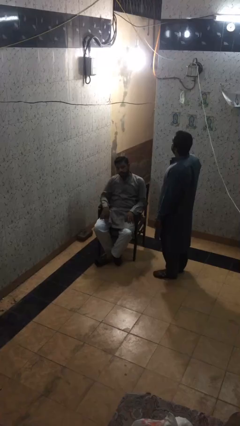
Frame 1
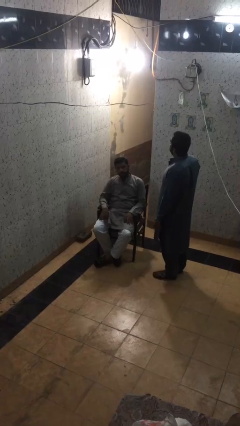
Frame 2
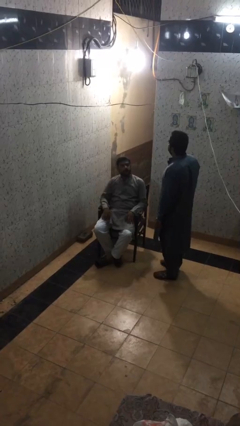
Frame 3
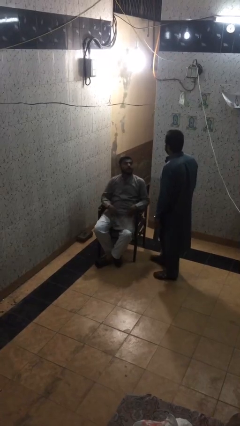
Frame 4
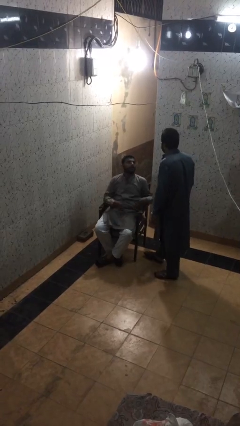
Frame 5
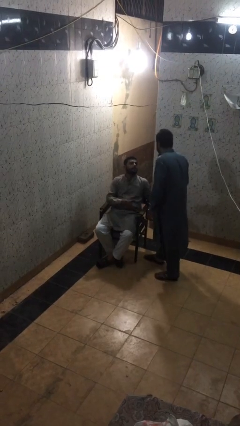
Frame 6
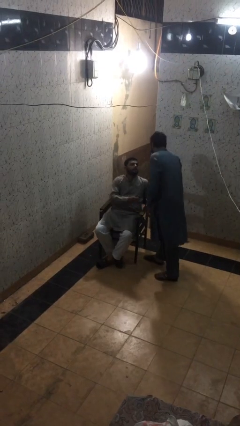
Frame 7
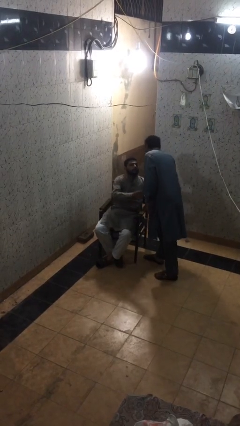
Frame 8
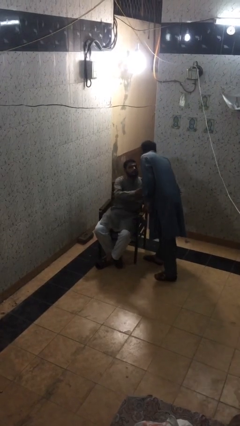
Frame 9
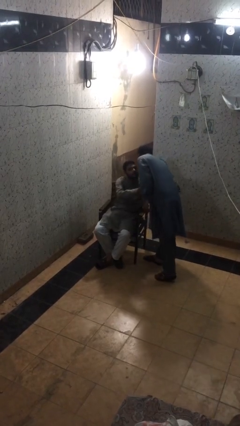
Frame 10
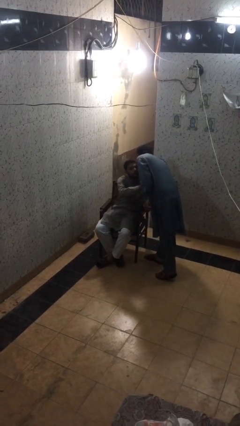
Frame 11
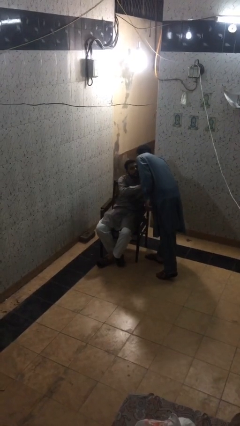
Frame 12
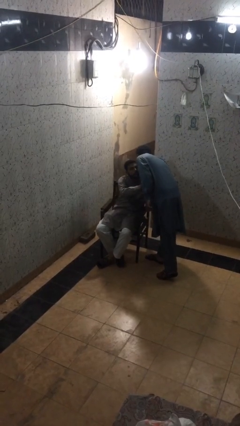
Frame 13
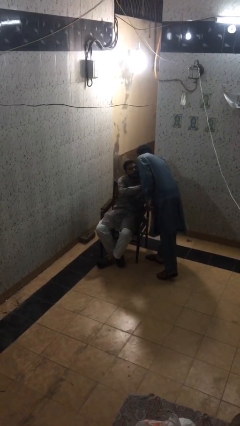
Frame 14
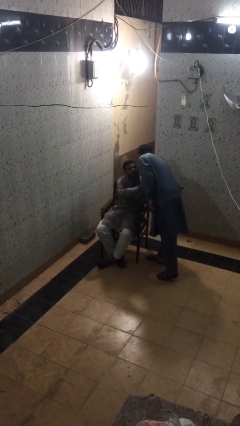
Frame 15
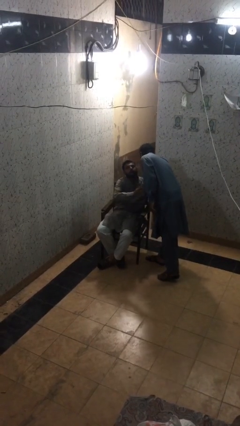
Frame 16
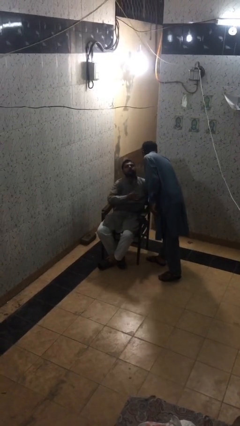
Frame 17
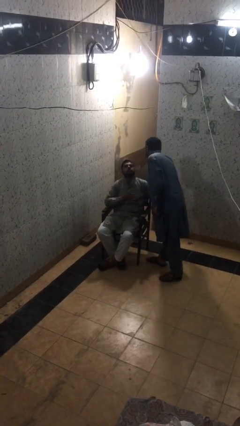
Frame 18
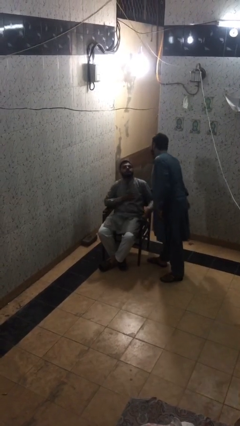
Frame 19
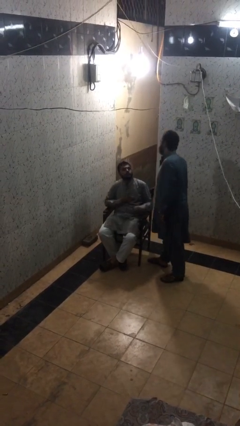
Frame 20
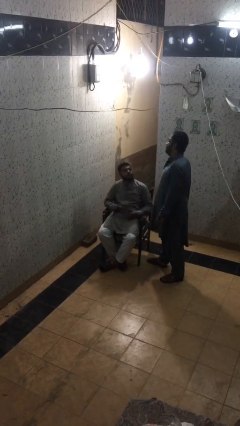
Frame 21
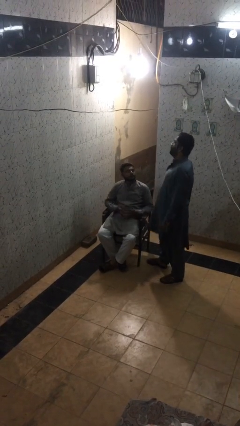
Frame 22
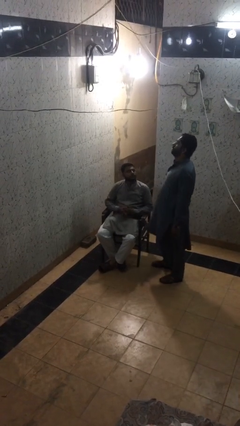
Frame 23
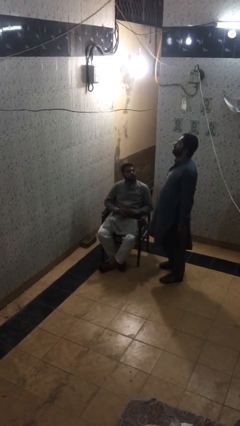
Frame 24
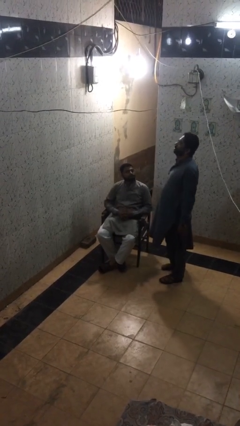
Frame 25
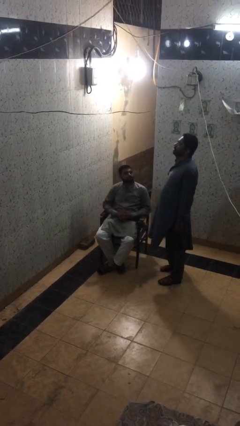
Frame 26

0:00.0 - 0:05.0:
person embraces person
